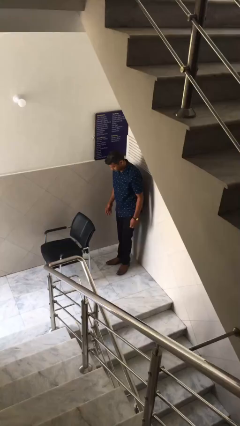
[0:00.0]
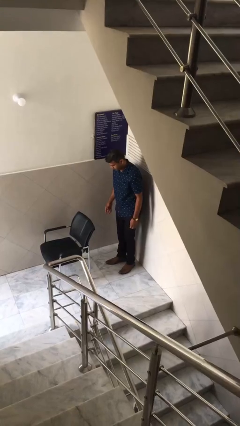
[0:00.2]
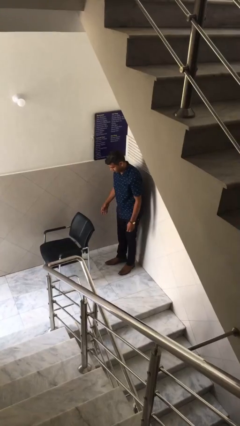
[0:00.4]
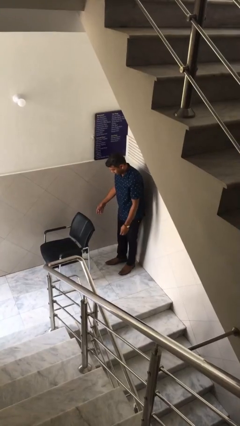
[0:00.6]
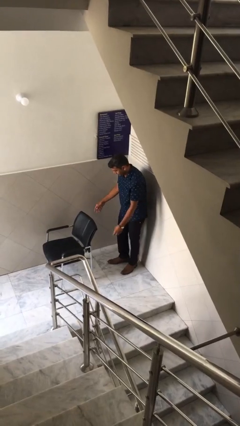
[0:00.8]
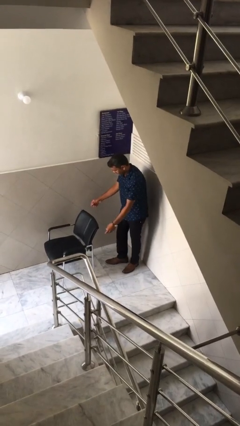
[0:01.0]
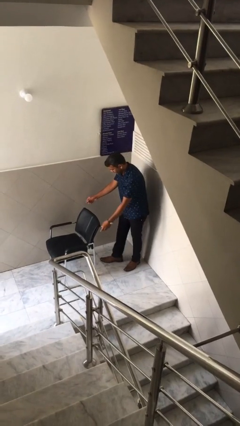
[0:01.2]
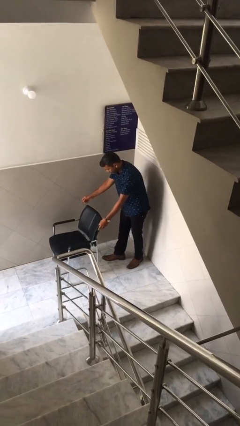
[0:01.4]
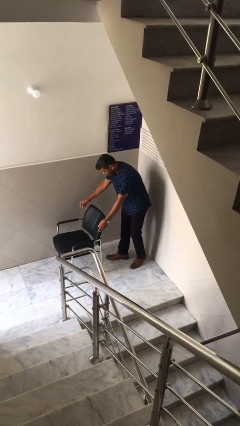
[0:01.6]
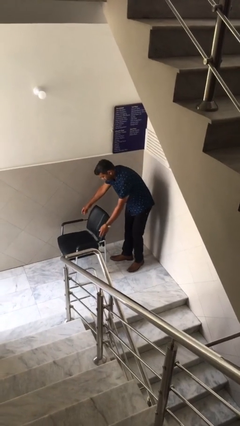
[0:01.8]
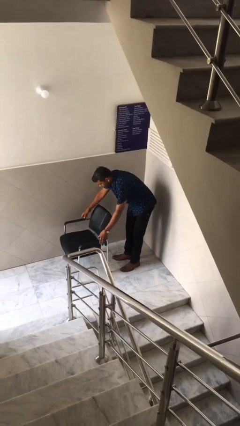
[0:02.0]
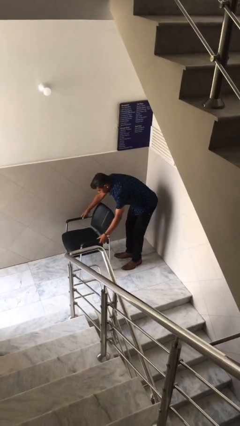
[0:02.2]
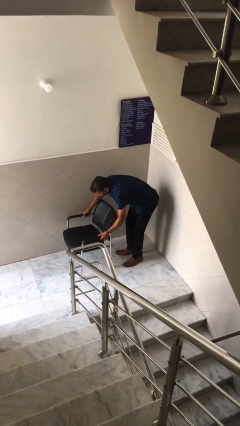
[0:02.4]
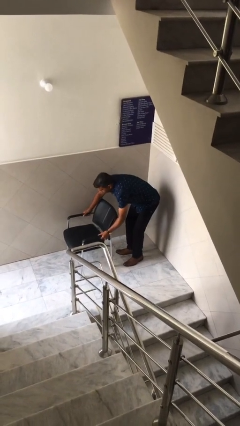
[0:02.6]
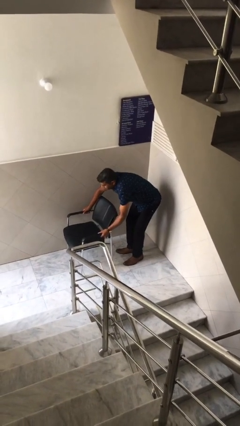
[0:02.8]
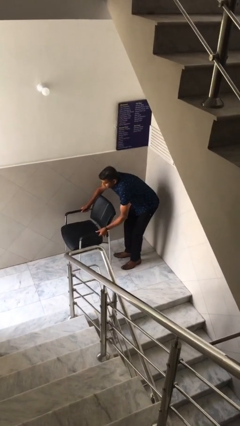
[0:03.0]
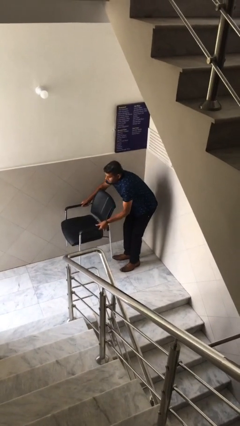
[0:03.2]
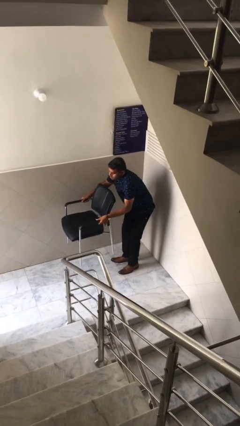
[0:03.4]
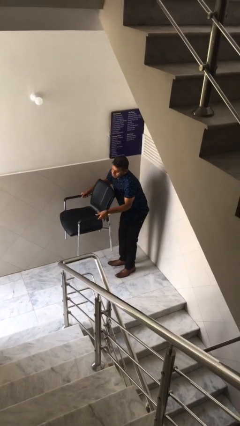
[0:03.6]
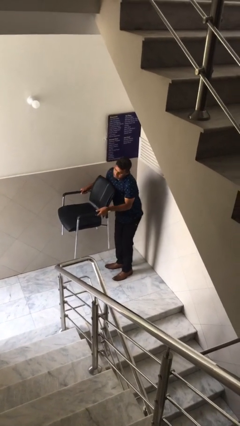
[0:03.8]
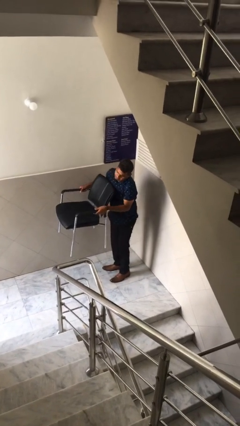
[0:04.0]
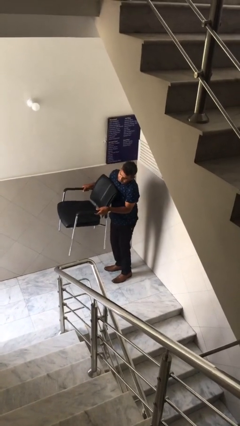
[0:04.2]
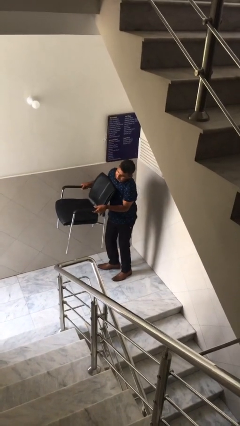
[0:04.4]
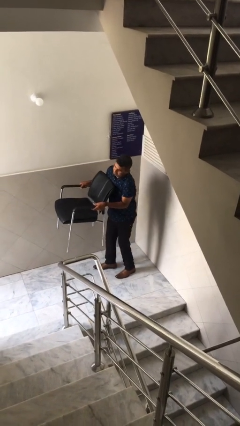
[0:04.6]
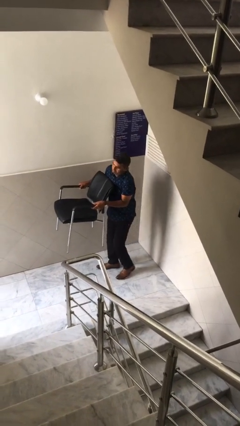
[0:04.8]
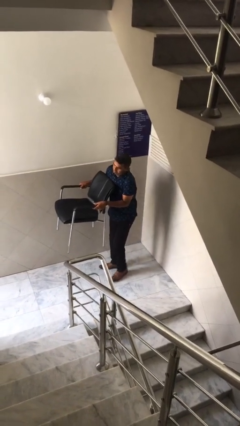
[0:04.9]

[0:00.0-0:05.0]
person picks up object from floor

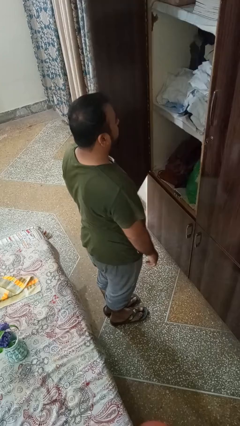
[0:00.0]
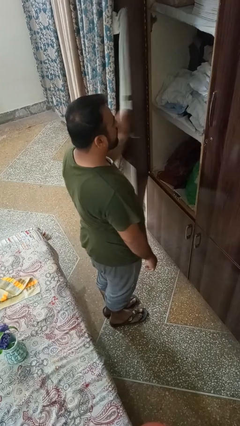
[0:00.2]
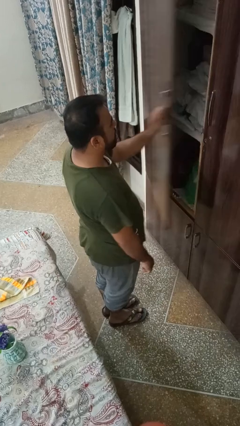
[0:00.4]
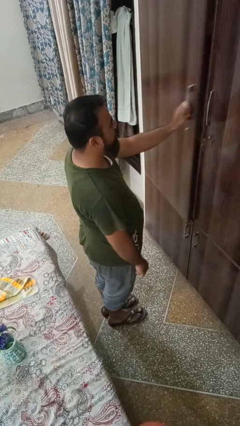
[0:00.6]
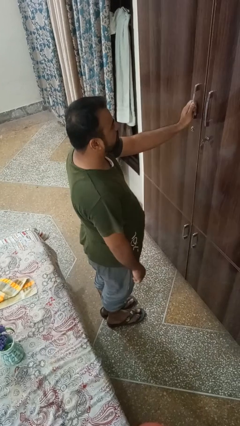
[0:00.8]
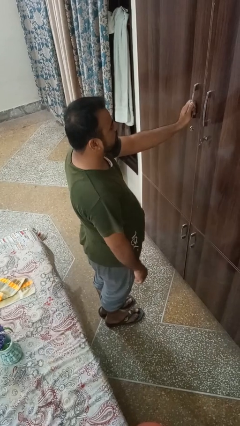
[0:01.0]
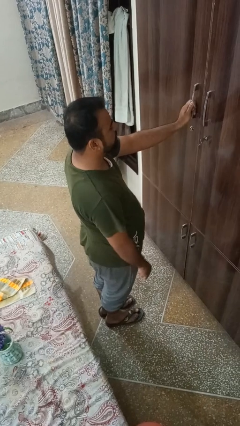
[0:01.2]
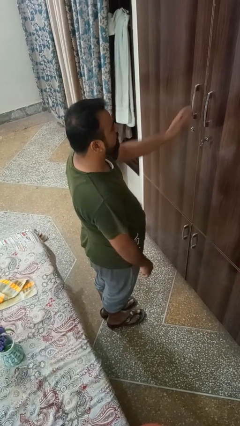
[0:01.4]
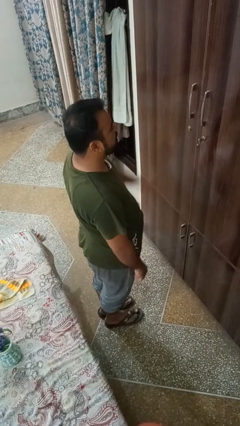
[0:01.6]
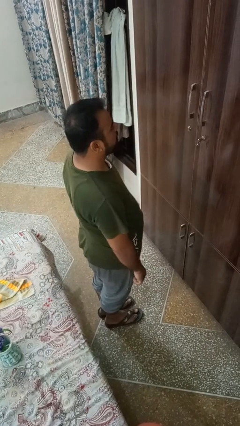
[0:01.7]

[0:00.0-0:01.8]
person closes closet door

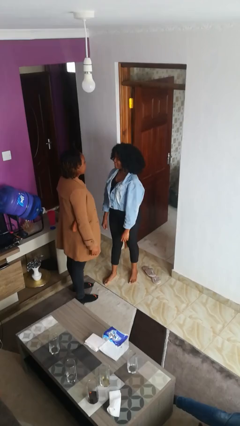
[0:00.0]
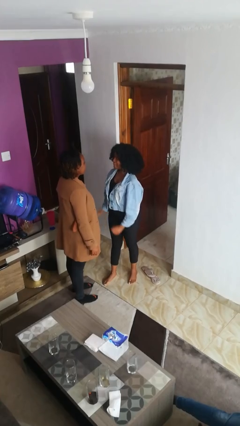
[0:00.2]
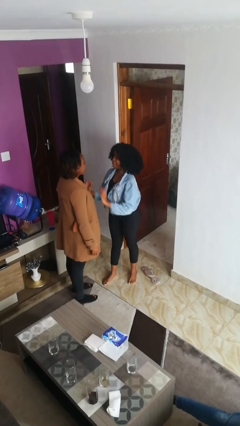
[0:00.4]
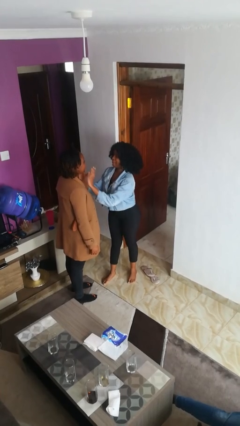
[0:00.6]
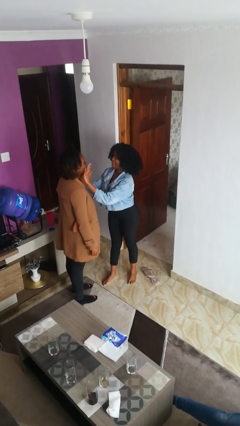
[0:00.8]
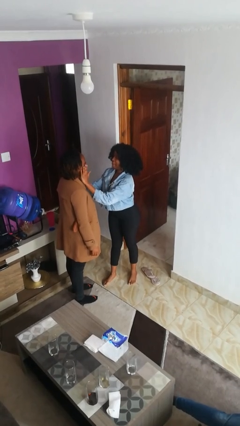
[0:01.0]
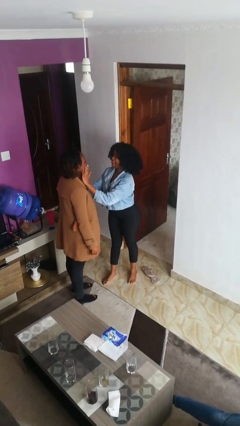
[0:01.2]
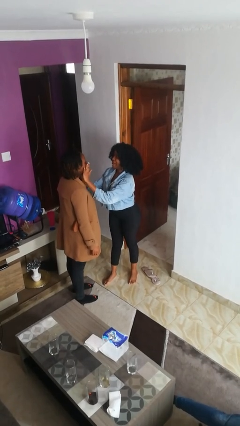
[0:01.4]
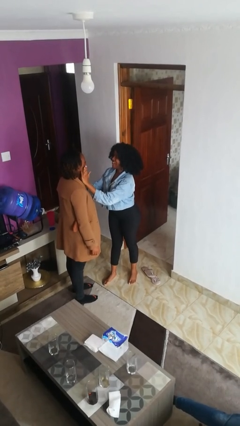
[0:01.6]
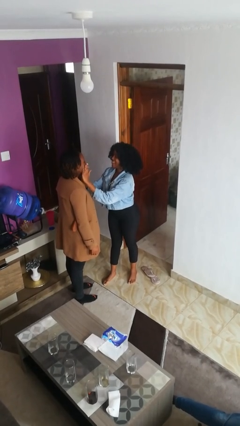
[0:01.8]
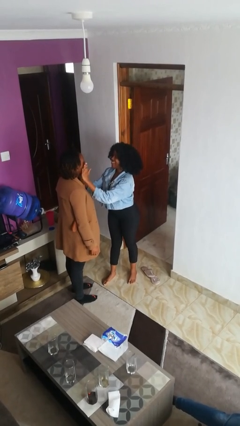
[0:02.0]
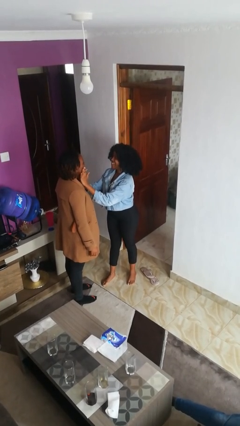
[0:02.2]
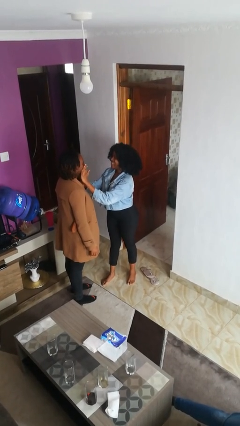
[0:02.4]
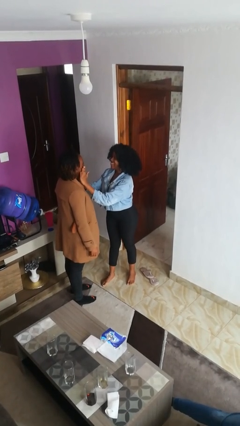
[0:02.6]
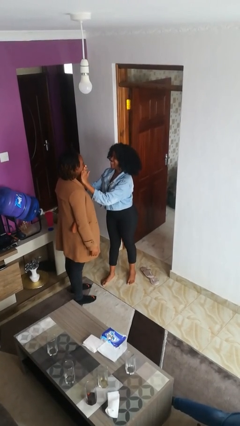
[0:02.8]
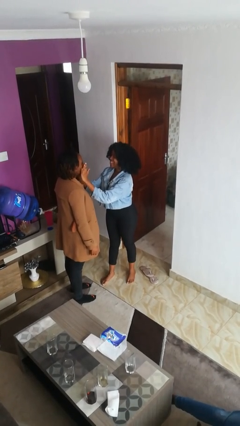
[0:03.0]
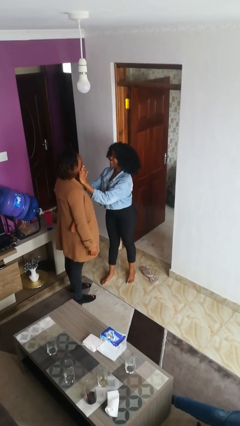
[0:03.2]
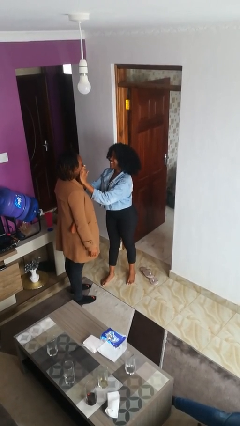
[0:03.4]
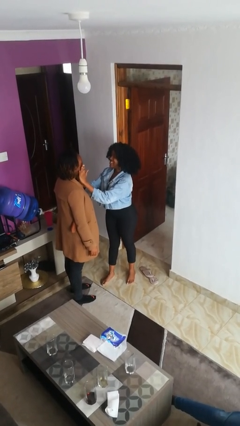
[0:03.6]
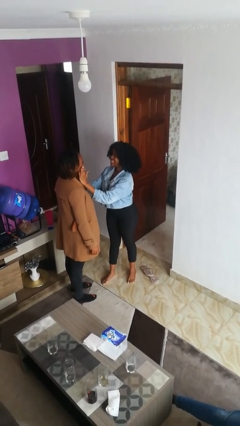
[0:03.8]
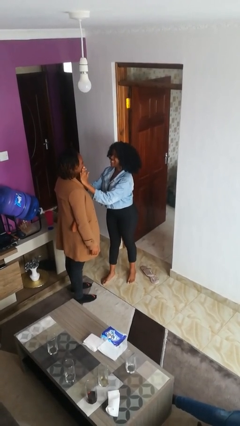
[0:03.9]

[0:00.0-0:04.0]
person touches face of person

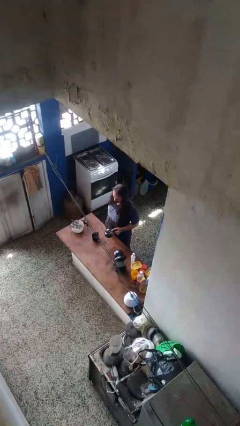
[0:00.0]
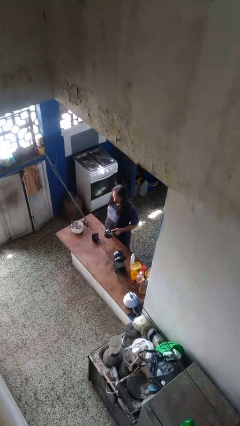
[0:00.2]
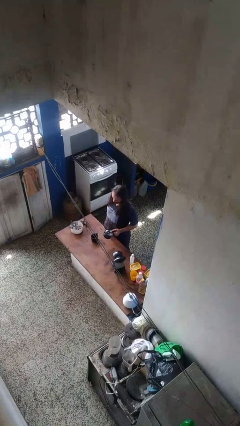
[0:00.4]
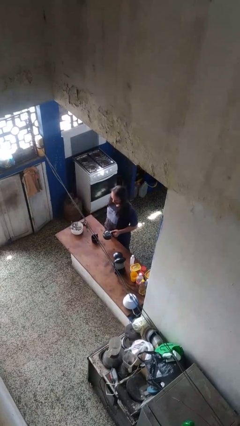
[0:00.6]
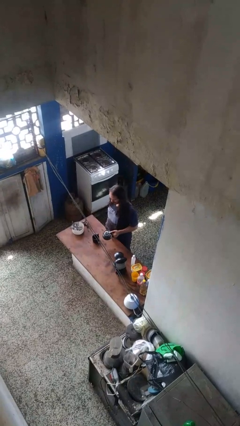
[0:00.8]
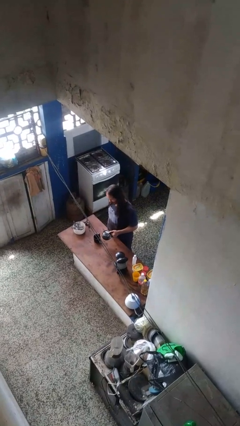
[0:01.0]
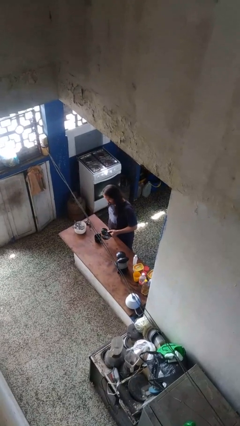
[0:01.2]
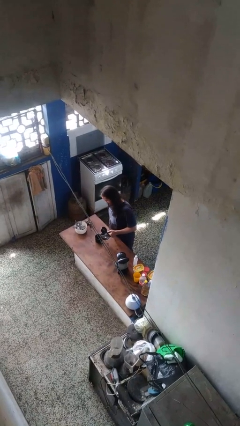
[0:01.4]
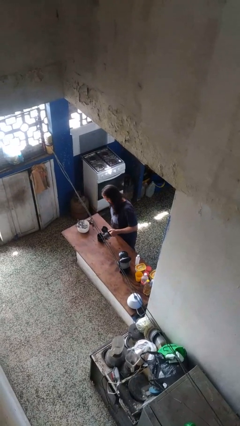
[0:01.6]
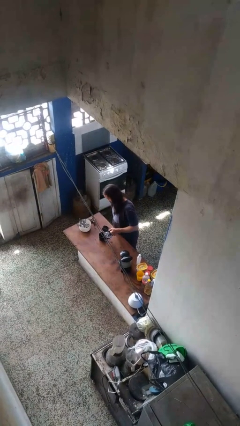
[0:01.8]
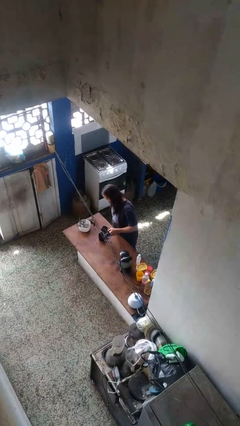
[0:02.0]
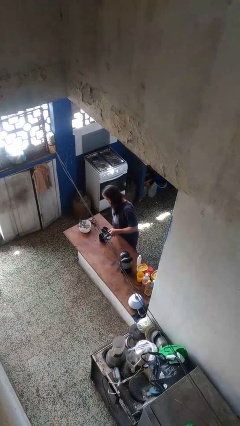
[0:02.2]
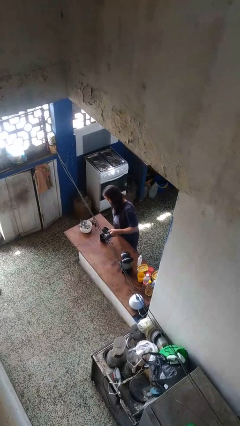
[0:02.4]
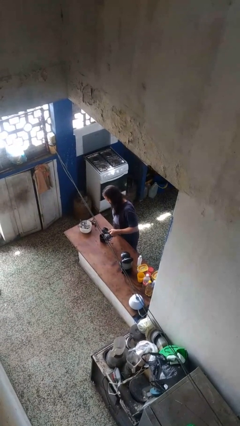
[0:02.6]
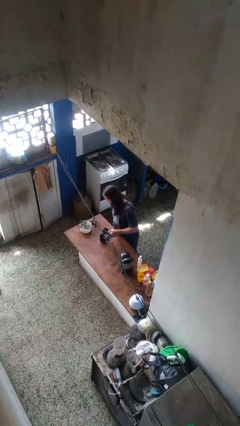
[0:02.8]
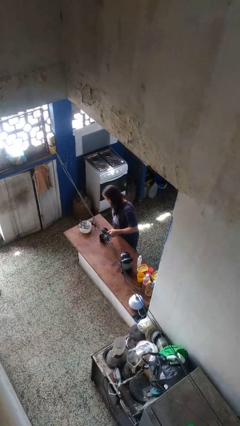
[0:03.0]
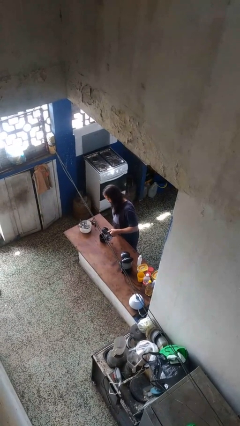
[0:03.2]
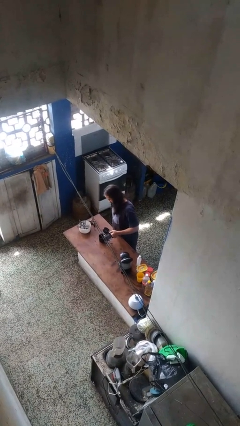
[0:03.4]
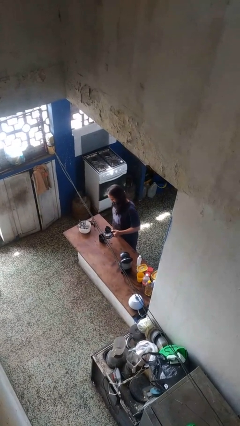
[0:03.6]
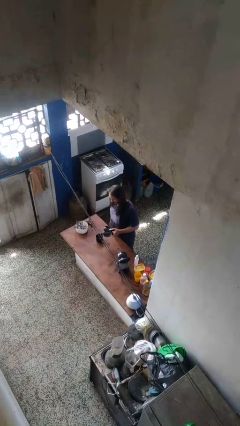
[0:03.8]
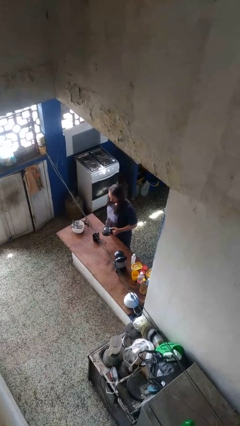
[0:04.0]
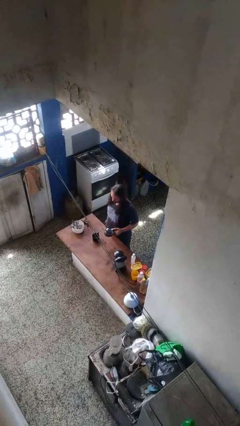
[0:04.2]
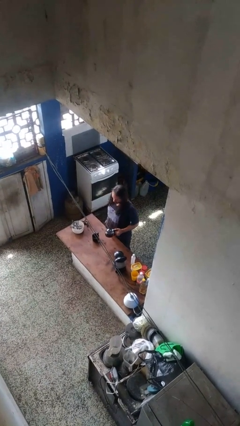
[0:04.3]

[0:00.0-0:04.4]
person pours coffee into mug

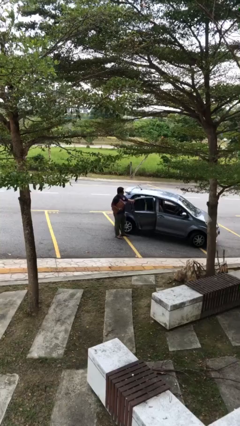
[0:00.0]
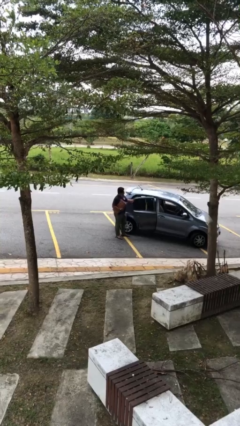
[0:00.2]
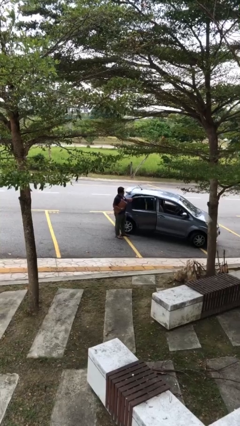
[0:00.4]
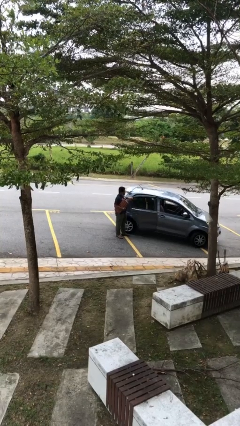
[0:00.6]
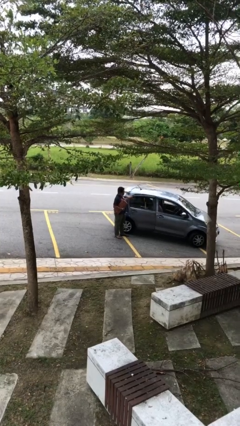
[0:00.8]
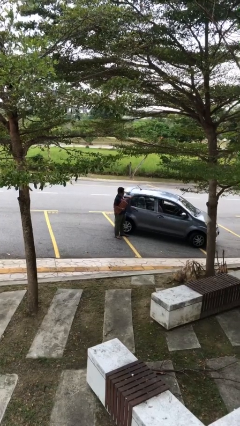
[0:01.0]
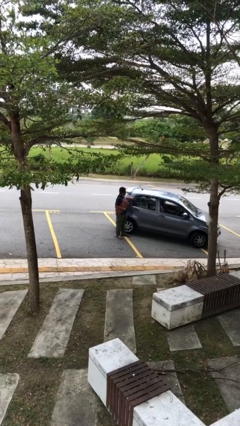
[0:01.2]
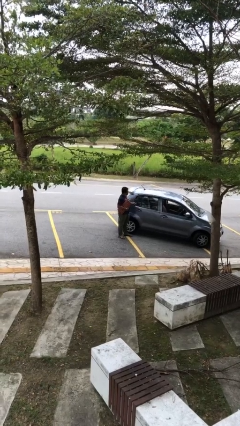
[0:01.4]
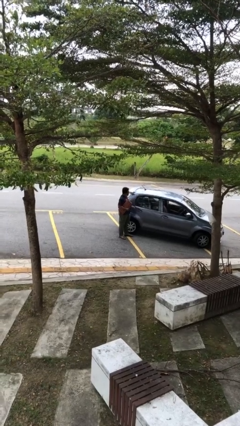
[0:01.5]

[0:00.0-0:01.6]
person closes car door

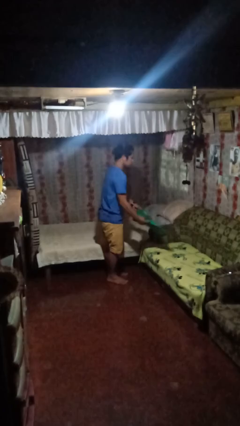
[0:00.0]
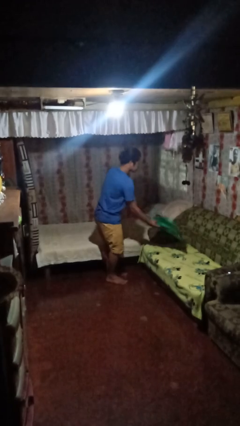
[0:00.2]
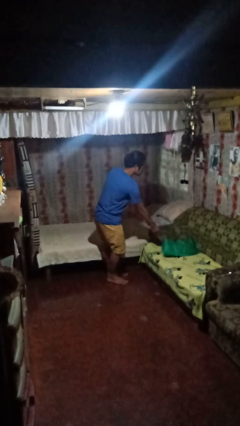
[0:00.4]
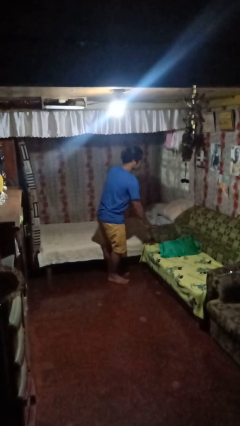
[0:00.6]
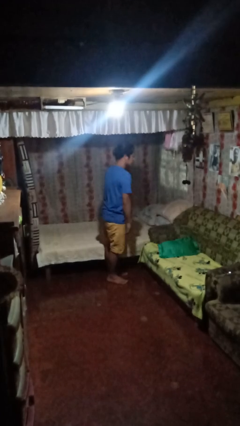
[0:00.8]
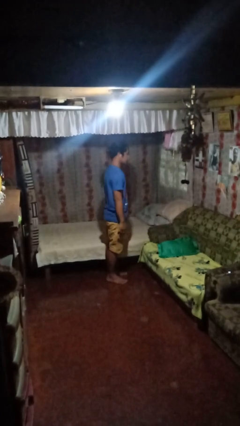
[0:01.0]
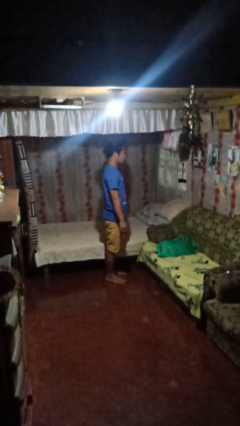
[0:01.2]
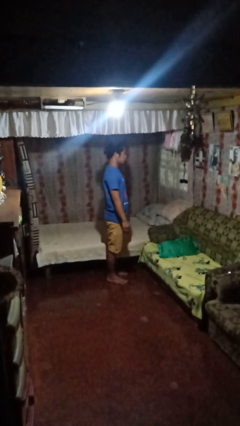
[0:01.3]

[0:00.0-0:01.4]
person puts down object on couch
